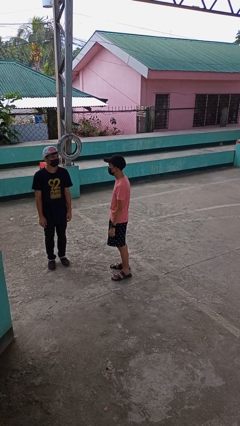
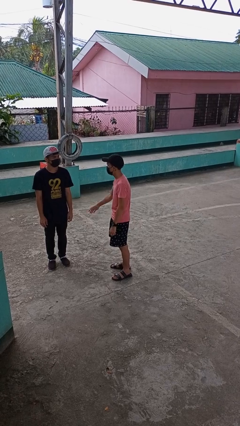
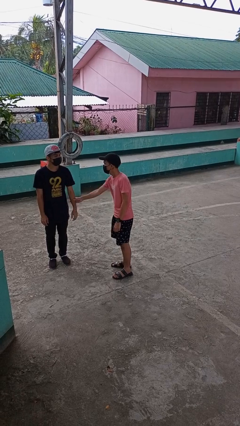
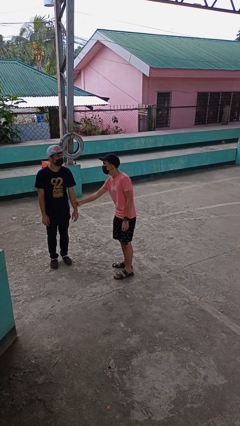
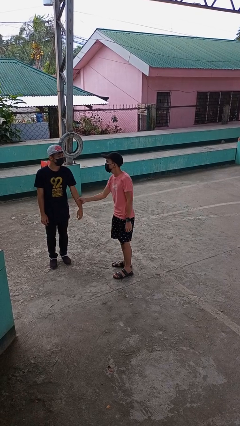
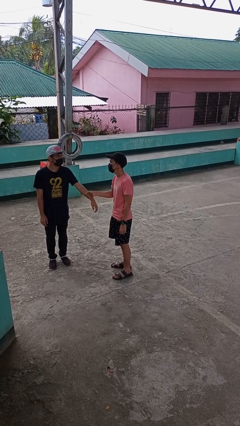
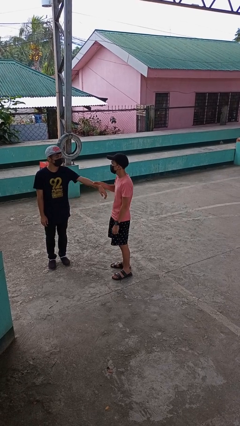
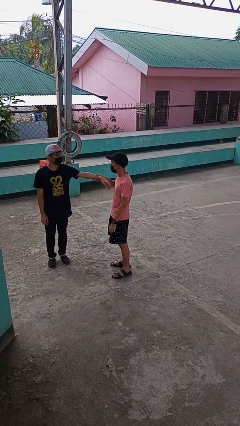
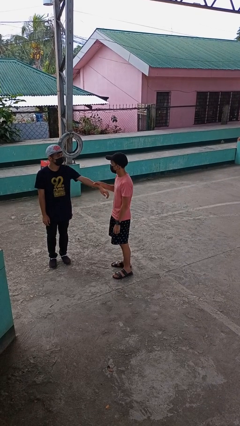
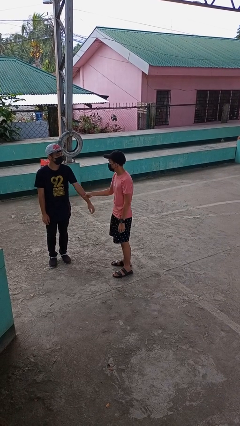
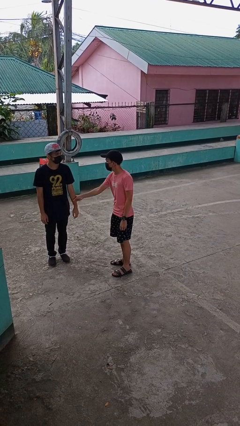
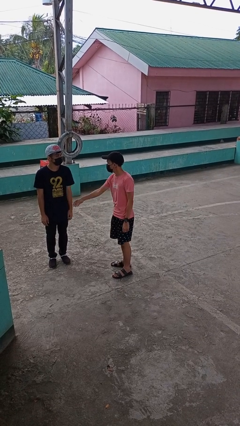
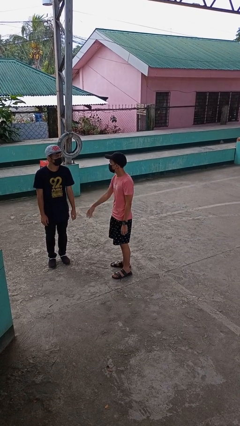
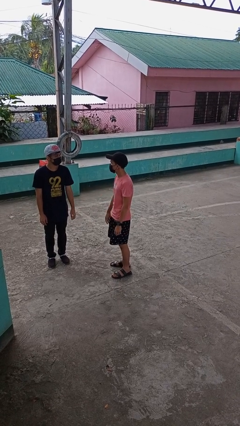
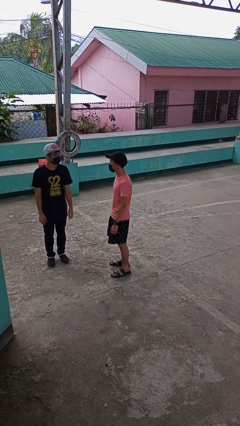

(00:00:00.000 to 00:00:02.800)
person grabs person by forearm

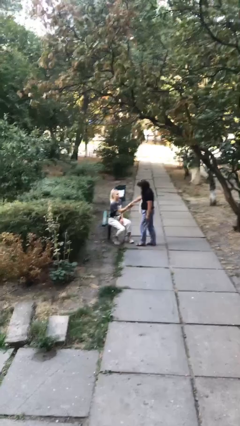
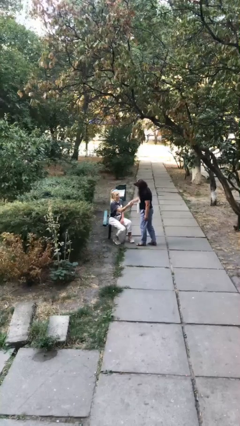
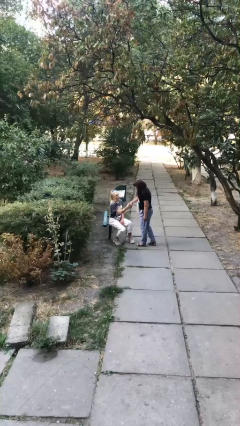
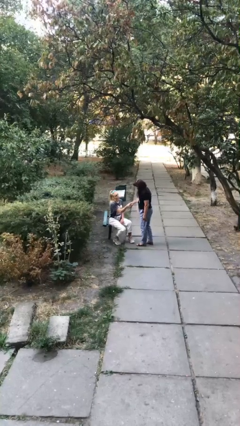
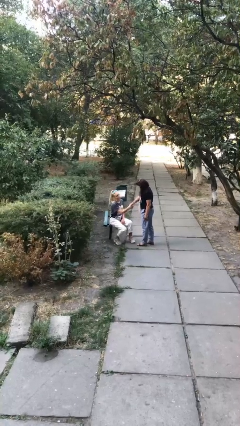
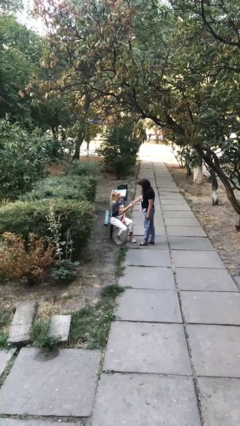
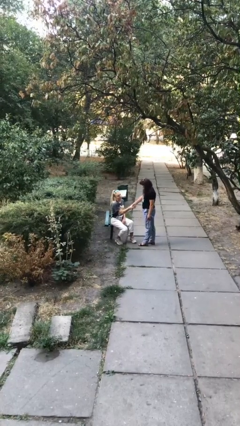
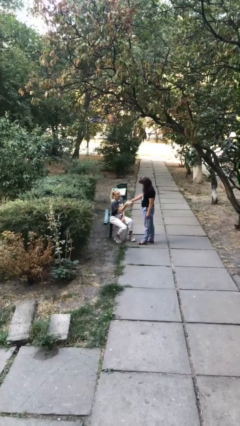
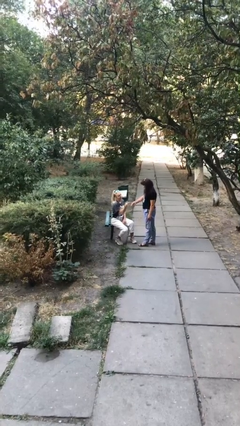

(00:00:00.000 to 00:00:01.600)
person shakes hand

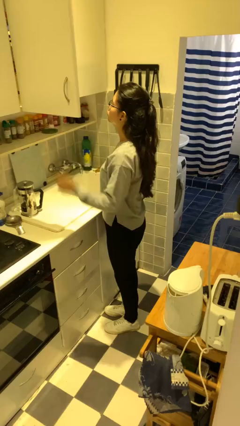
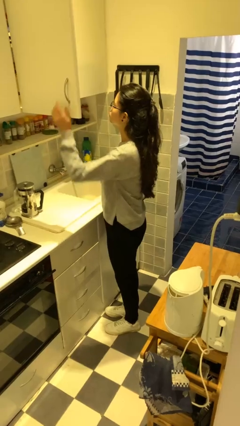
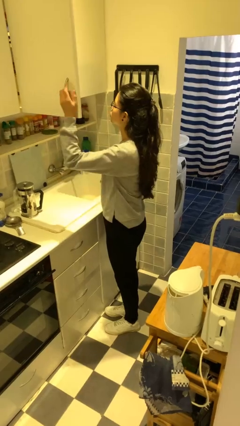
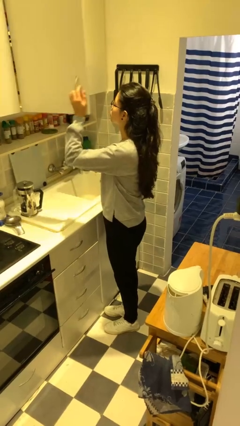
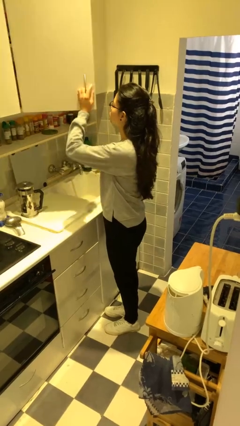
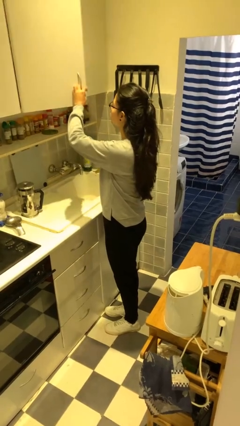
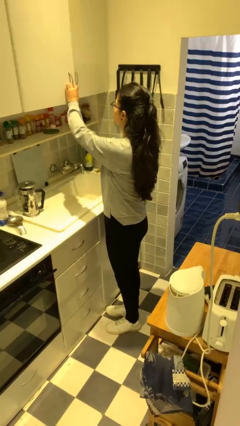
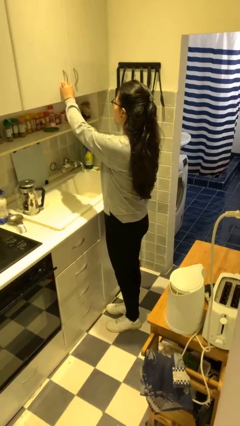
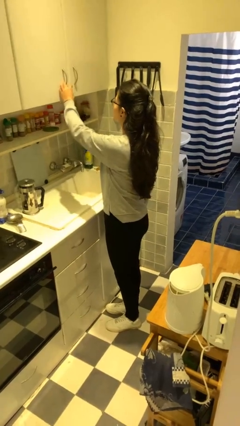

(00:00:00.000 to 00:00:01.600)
person closes cabinet

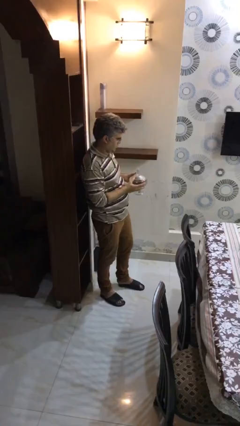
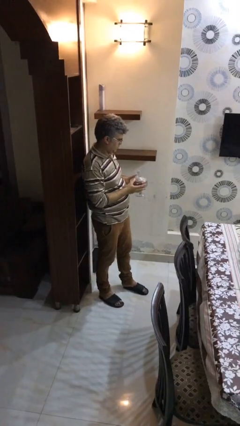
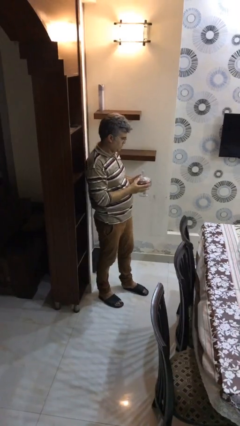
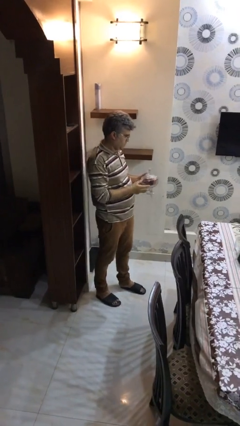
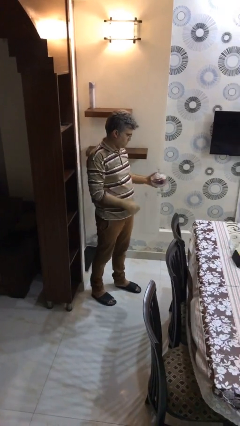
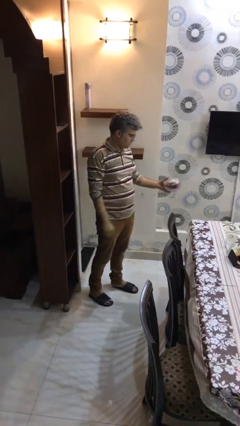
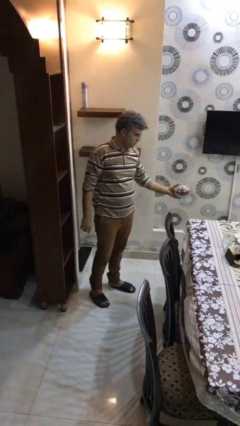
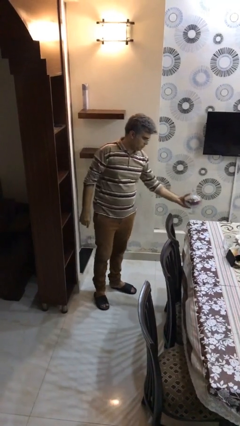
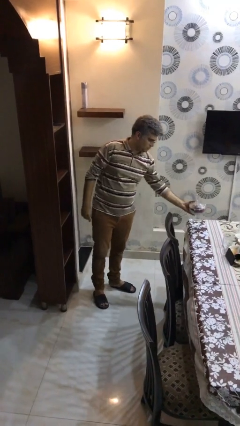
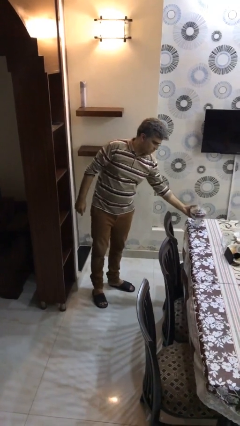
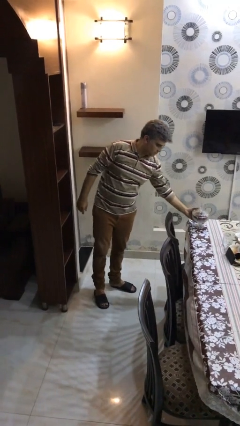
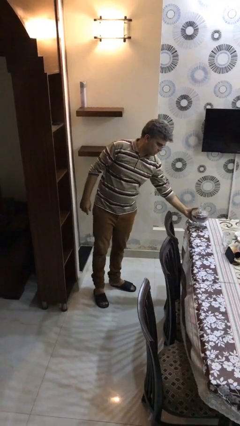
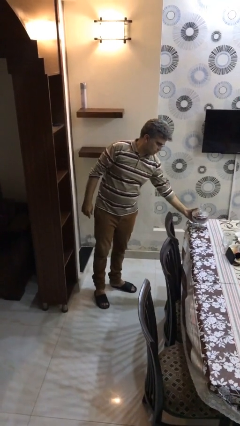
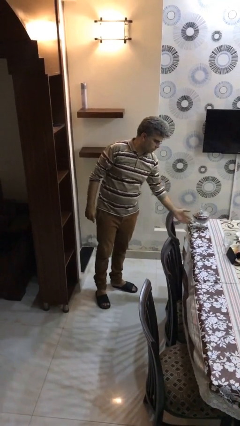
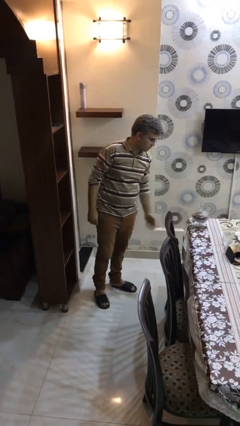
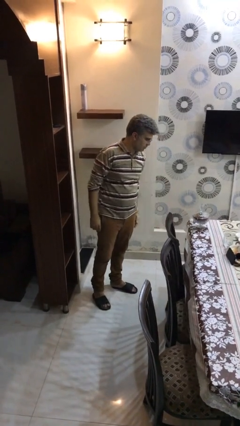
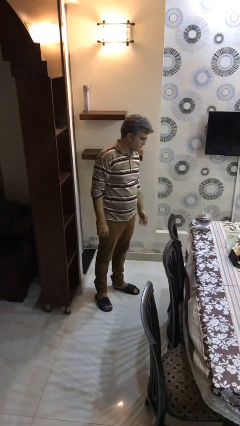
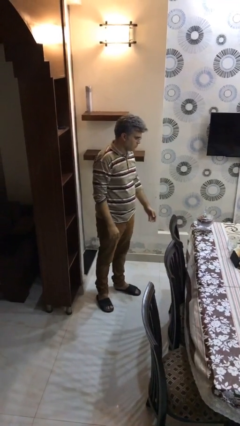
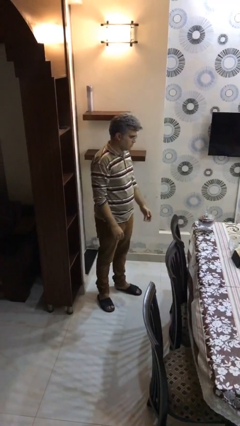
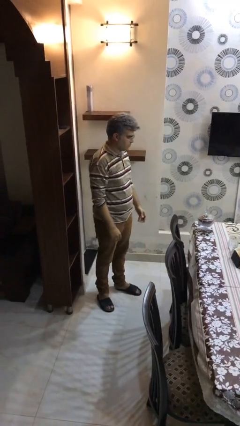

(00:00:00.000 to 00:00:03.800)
person puts down object on table

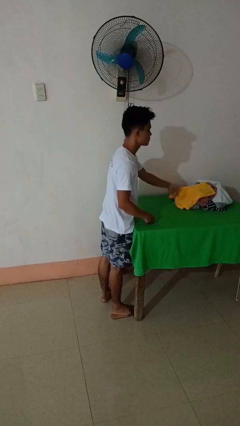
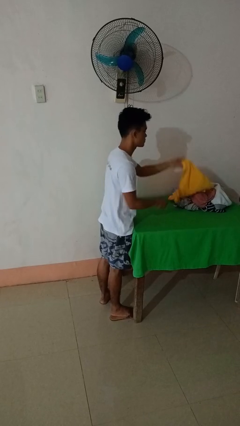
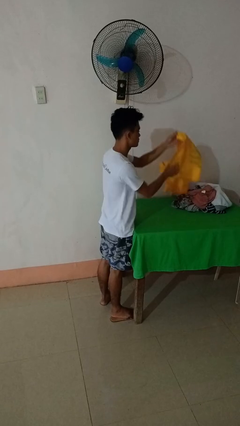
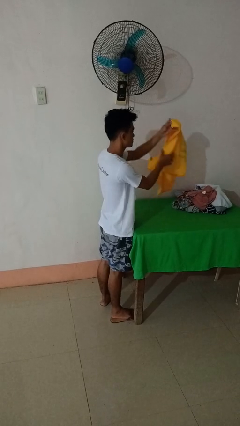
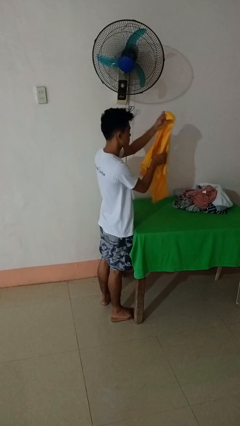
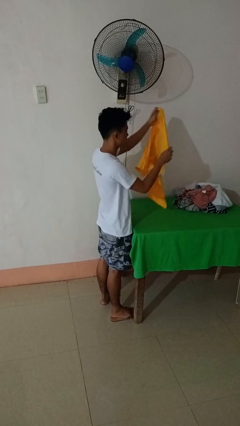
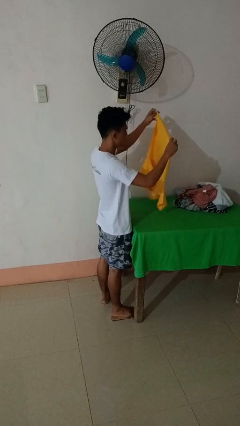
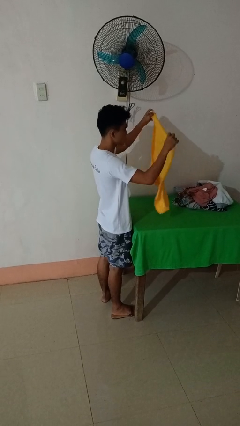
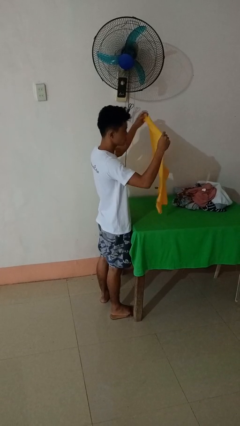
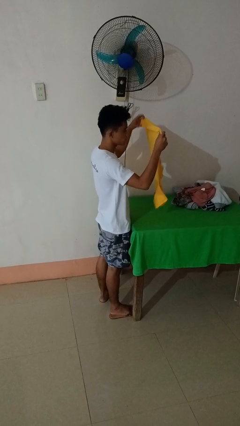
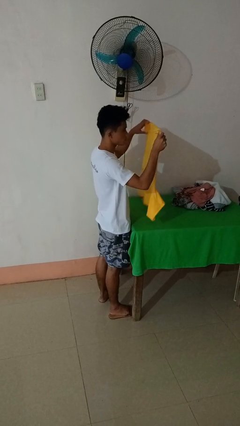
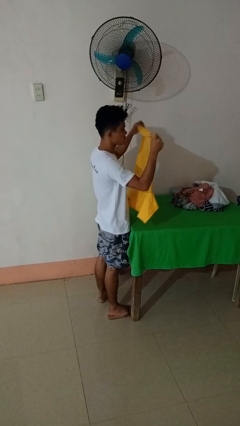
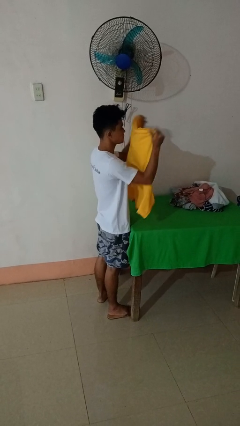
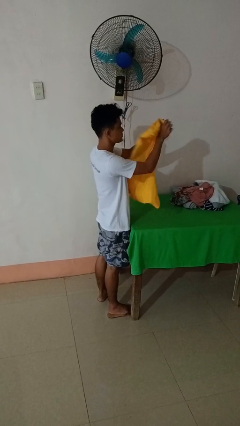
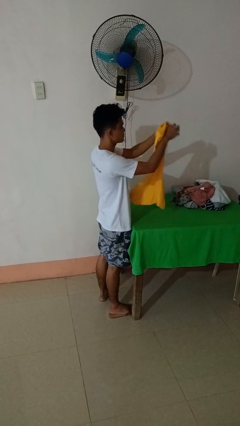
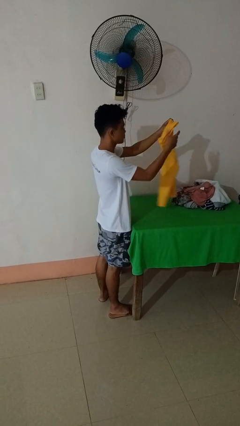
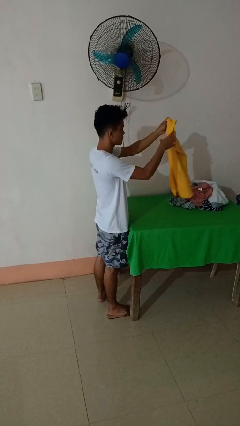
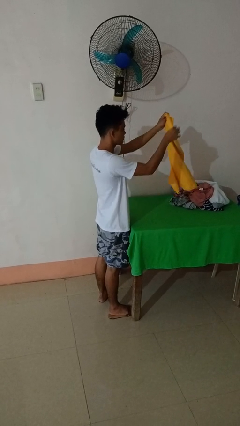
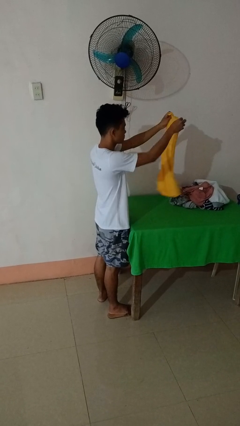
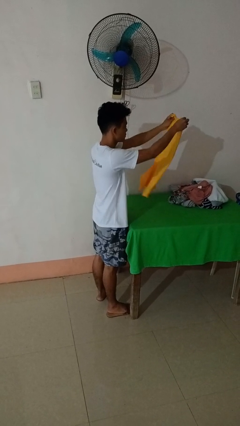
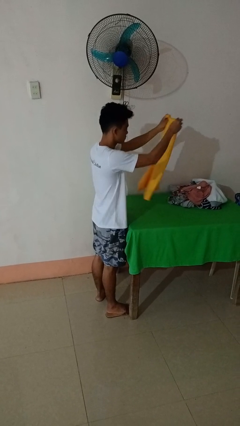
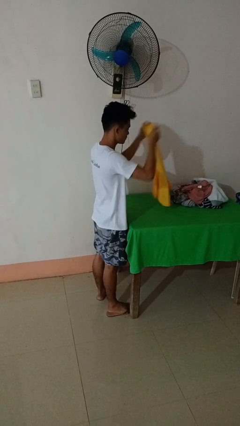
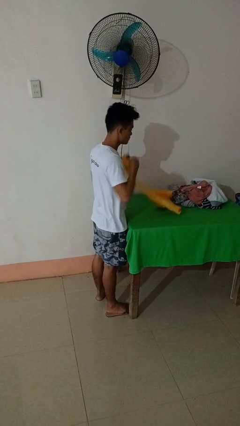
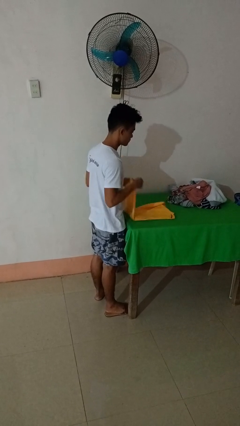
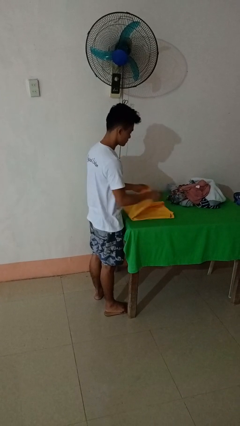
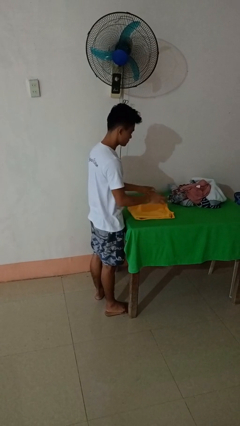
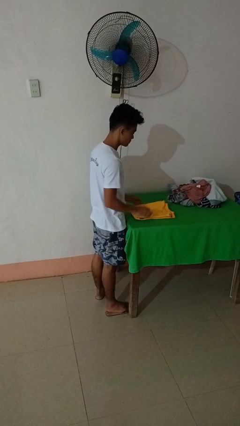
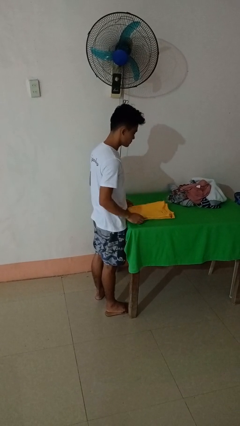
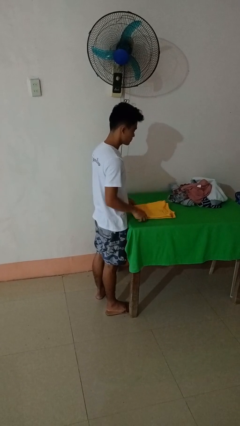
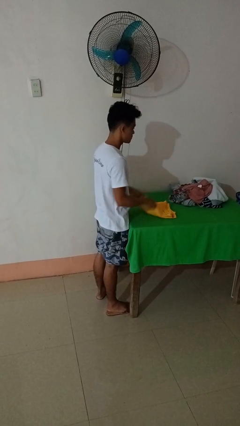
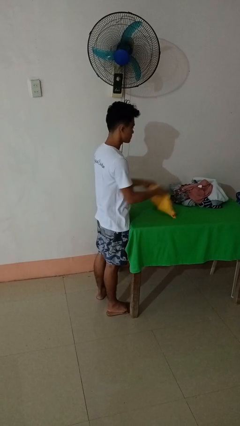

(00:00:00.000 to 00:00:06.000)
person folds shirt

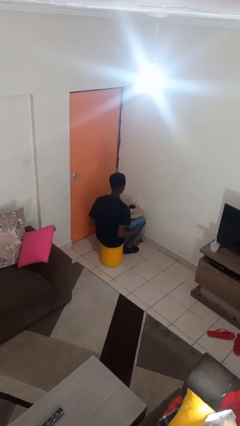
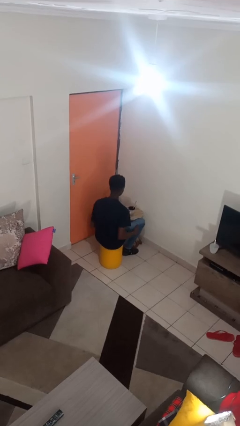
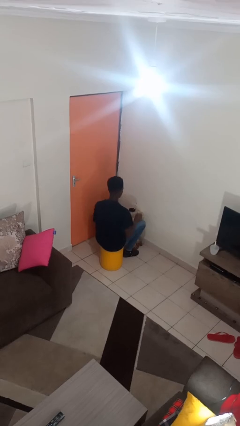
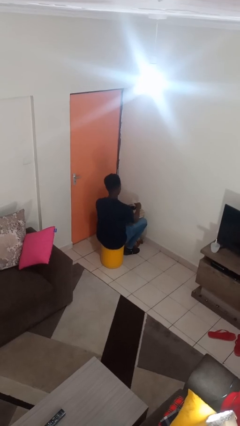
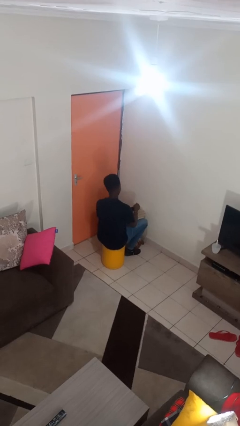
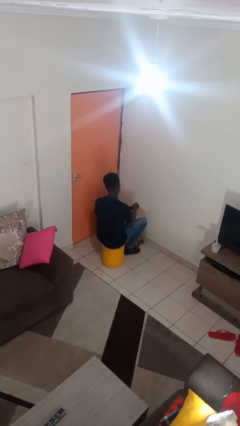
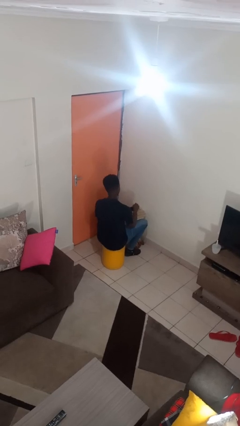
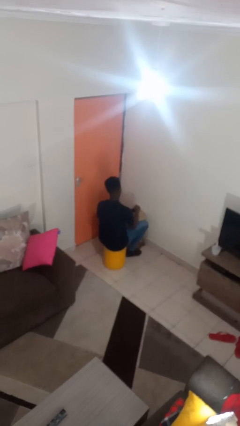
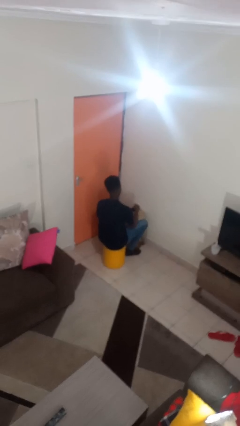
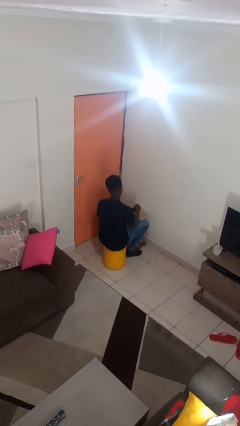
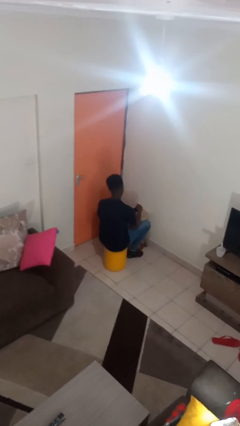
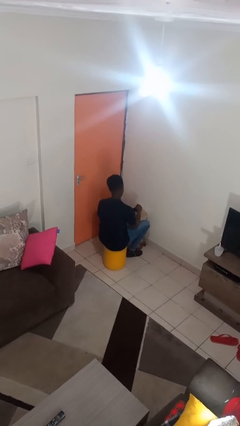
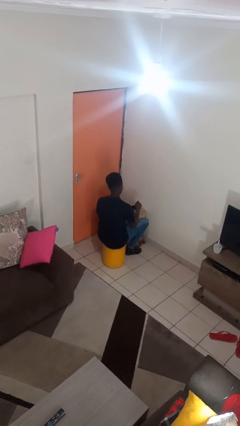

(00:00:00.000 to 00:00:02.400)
person stirs mug
